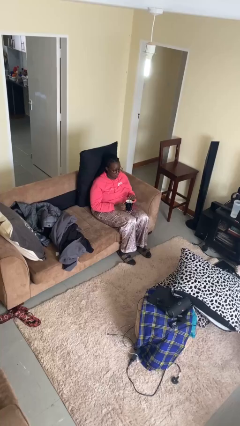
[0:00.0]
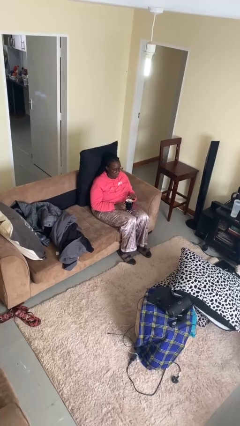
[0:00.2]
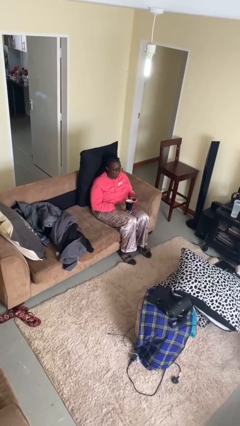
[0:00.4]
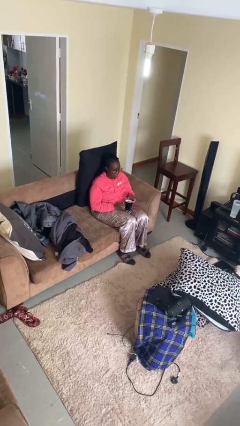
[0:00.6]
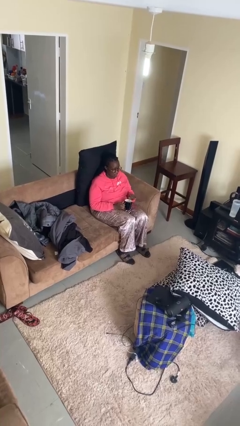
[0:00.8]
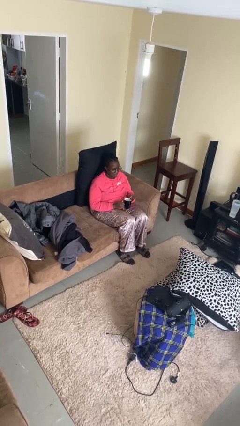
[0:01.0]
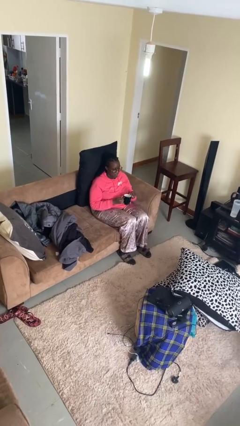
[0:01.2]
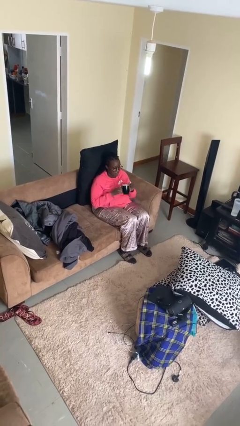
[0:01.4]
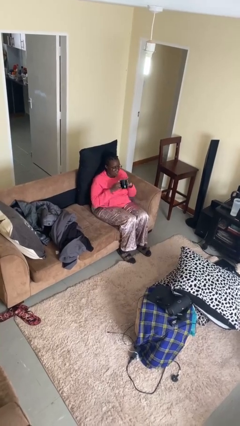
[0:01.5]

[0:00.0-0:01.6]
person stirs mug

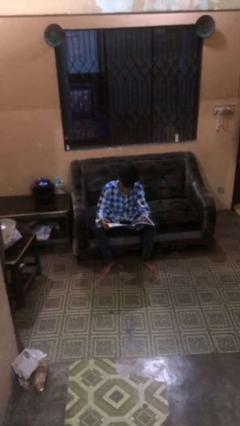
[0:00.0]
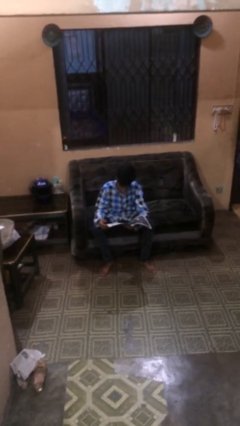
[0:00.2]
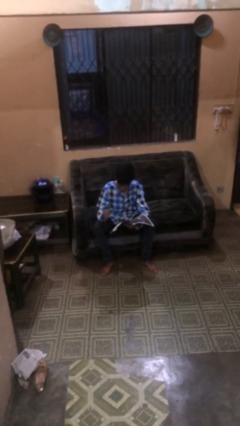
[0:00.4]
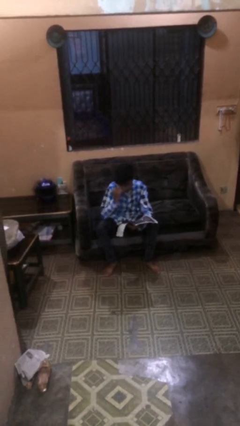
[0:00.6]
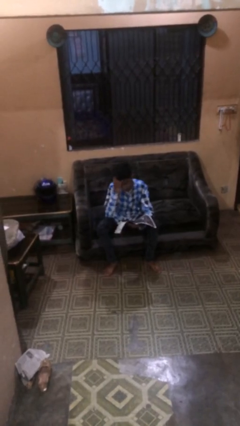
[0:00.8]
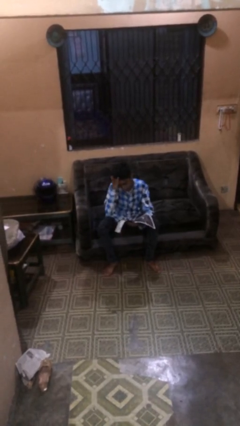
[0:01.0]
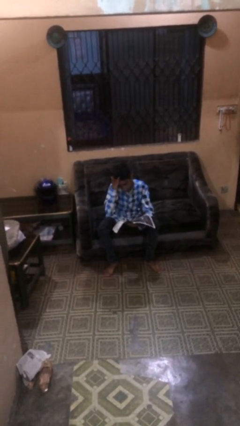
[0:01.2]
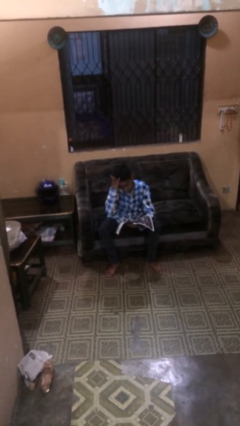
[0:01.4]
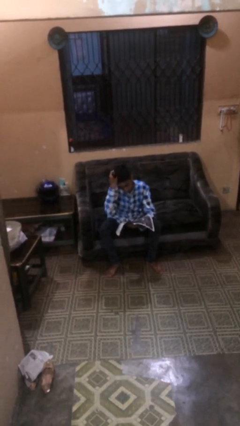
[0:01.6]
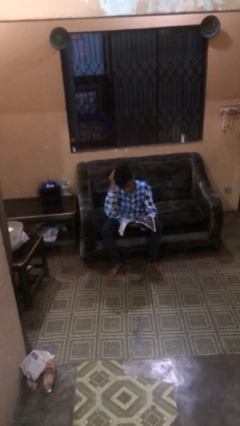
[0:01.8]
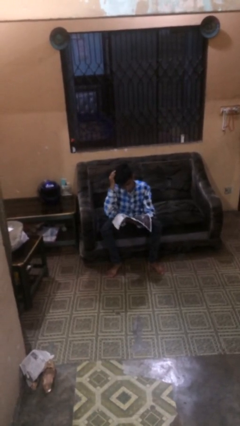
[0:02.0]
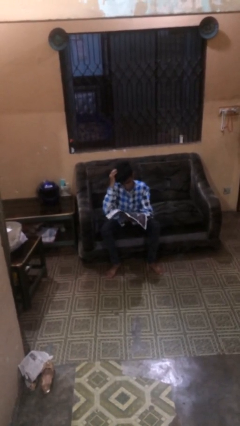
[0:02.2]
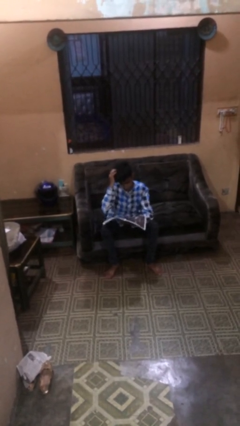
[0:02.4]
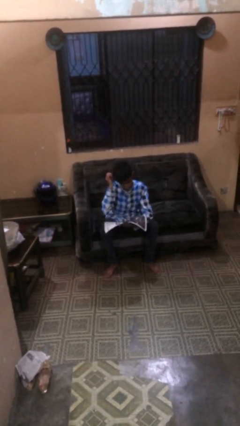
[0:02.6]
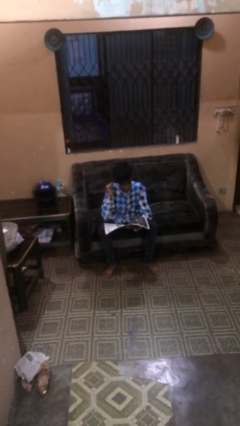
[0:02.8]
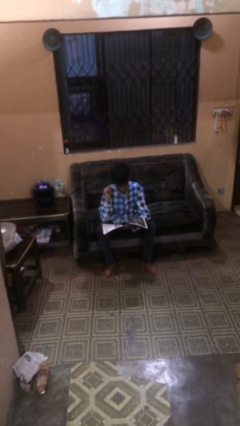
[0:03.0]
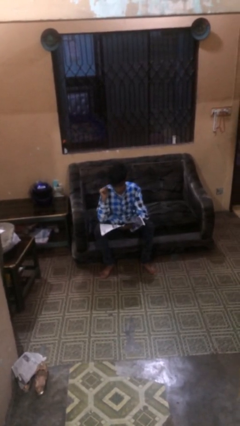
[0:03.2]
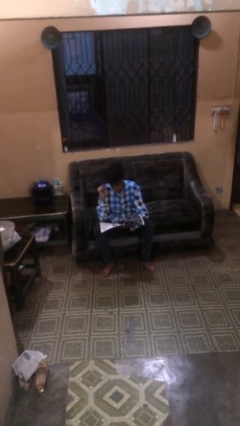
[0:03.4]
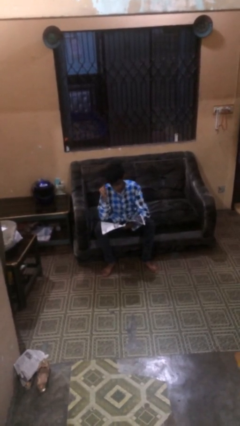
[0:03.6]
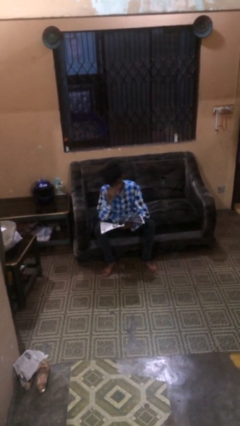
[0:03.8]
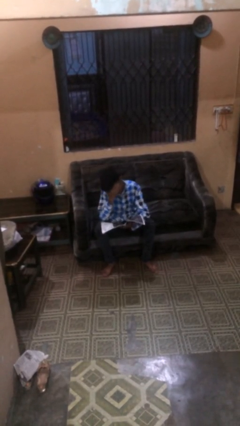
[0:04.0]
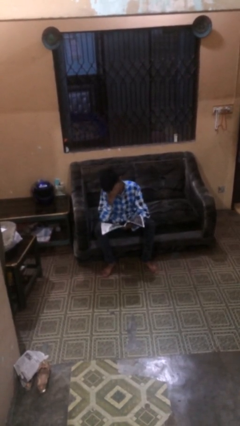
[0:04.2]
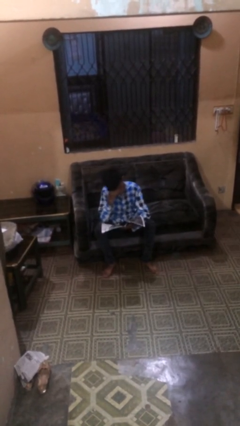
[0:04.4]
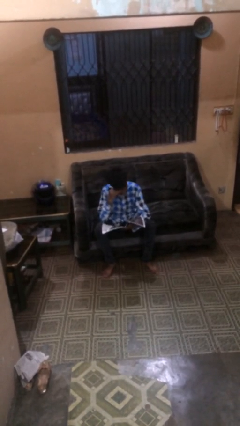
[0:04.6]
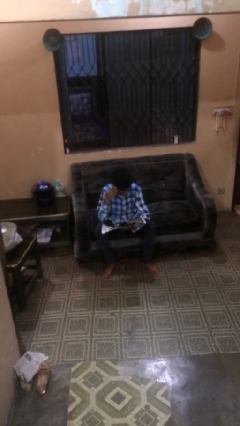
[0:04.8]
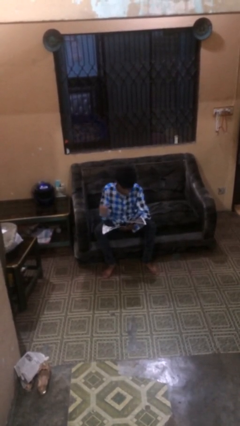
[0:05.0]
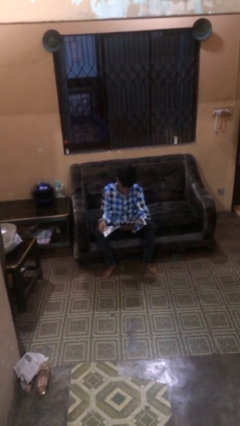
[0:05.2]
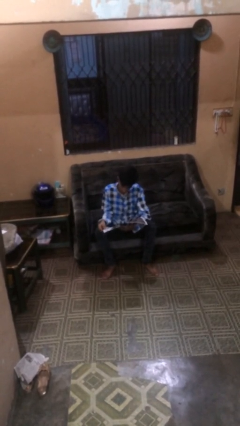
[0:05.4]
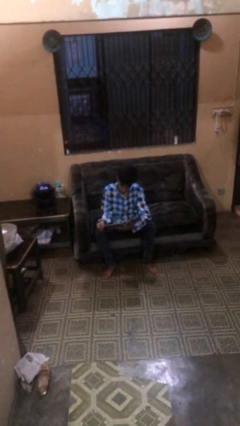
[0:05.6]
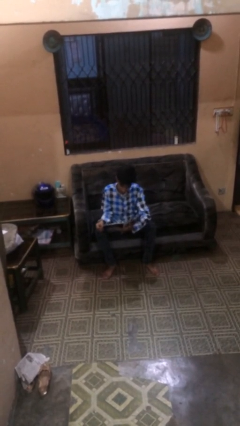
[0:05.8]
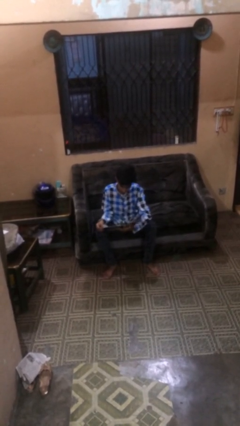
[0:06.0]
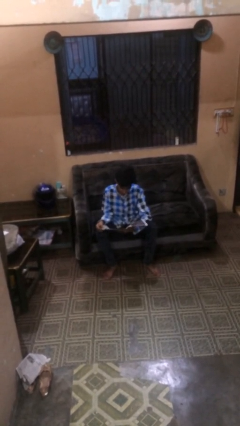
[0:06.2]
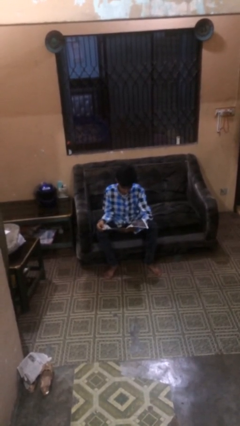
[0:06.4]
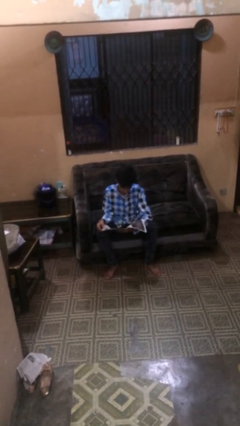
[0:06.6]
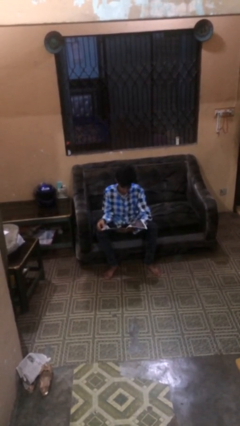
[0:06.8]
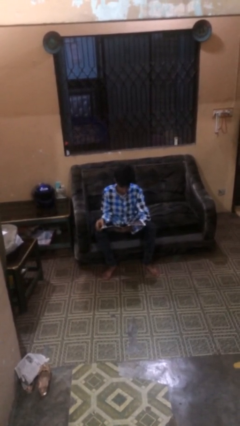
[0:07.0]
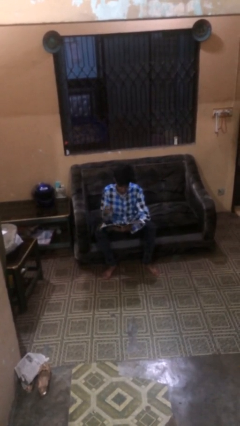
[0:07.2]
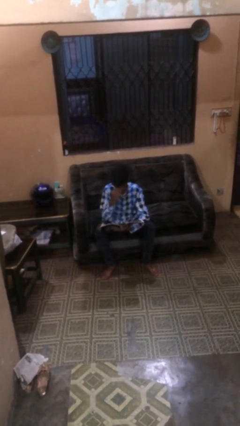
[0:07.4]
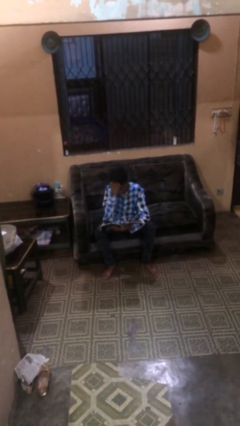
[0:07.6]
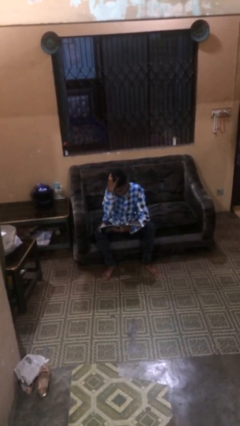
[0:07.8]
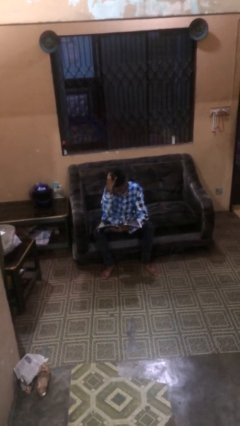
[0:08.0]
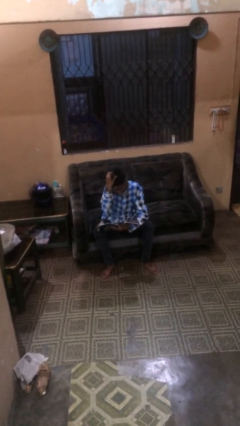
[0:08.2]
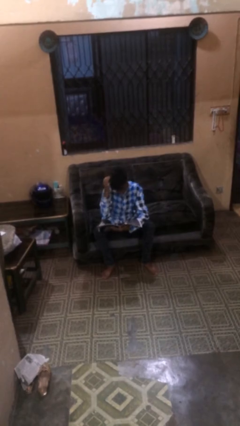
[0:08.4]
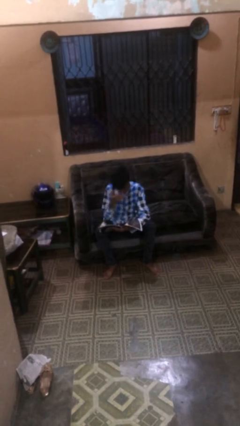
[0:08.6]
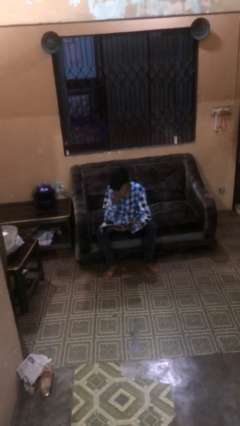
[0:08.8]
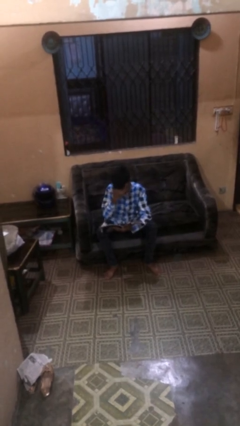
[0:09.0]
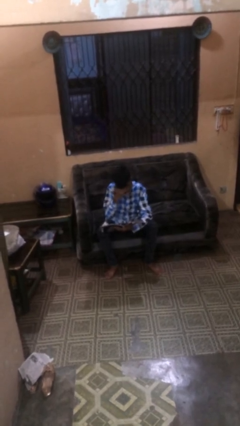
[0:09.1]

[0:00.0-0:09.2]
person reads document

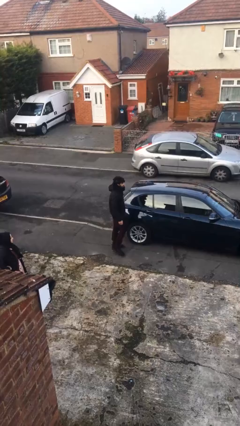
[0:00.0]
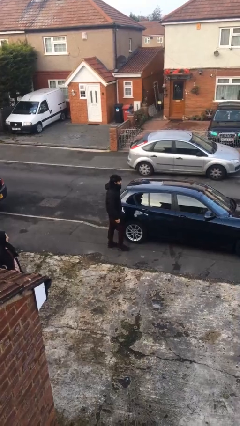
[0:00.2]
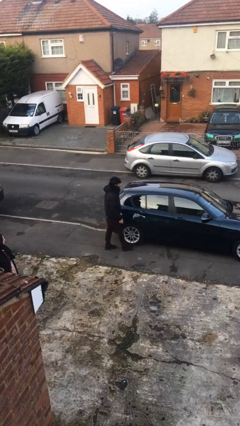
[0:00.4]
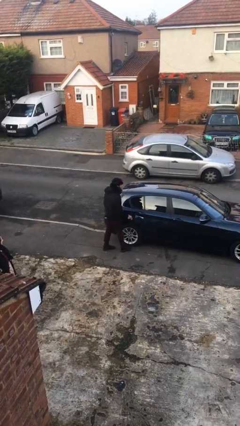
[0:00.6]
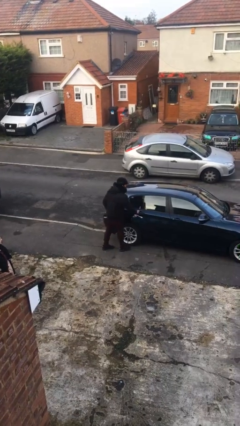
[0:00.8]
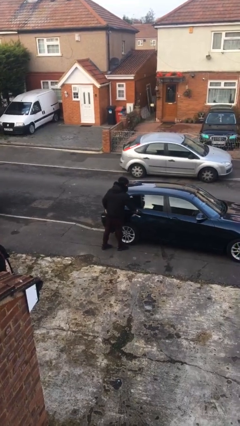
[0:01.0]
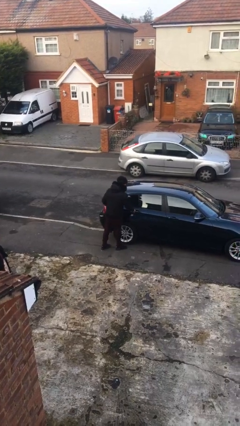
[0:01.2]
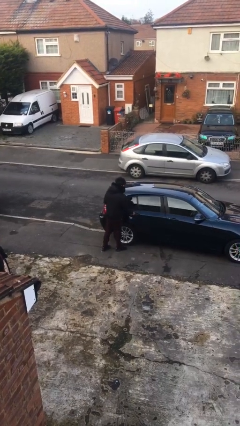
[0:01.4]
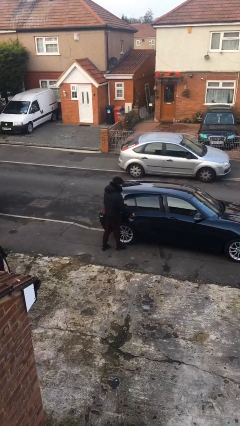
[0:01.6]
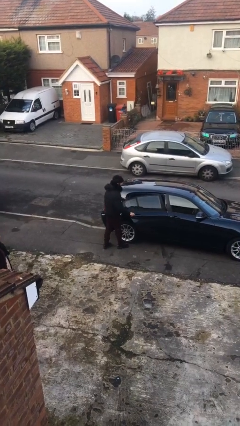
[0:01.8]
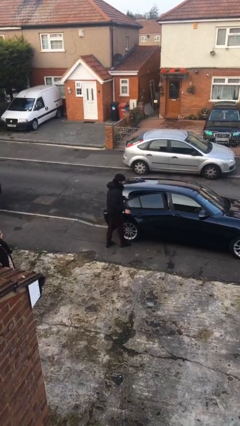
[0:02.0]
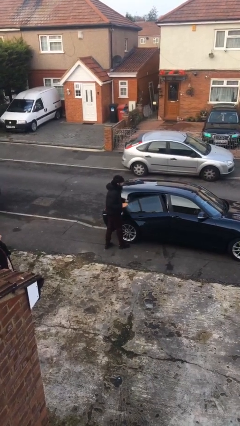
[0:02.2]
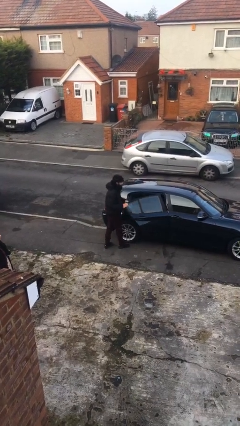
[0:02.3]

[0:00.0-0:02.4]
person opens car door

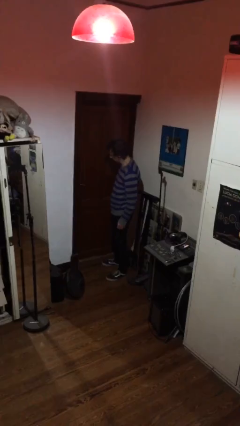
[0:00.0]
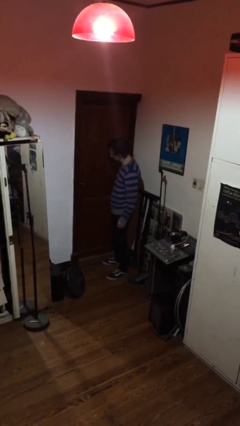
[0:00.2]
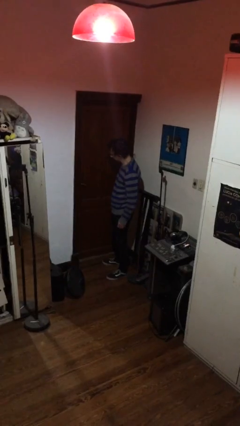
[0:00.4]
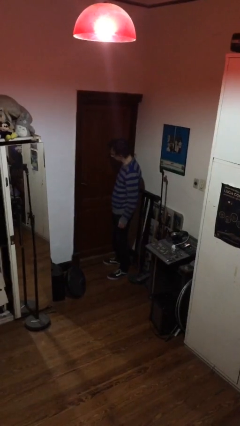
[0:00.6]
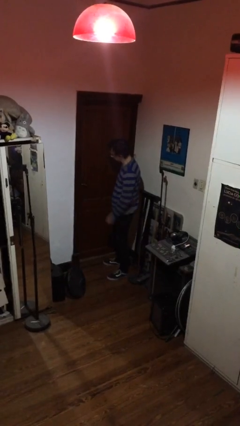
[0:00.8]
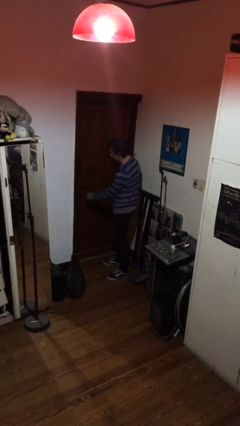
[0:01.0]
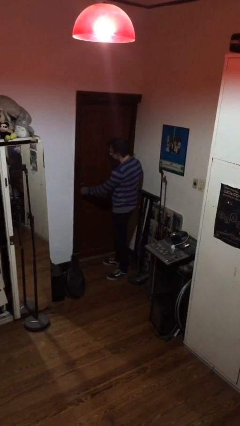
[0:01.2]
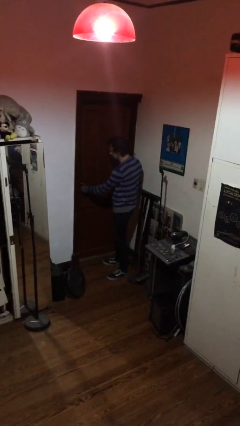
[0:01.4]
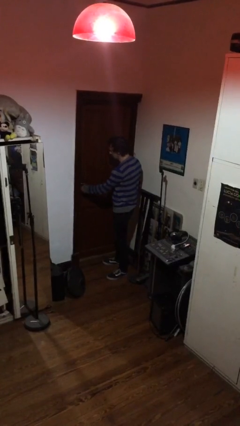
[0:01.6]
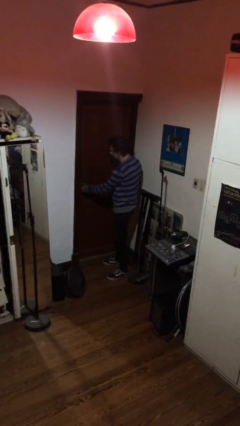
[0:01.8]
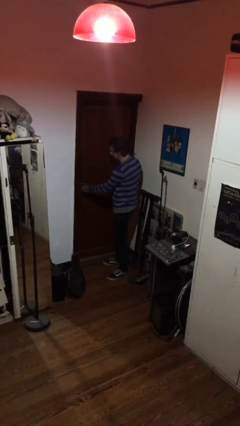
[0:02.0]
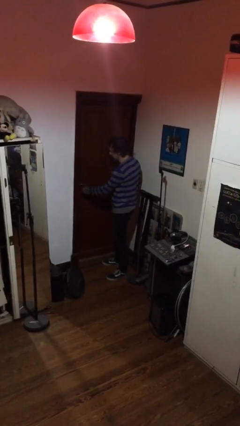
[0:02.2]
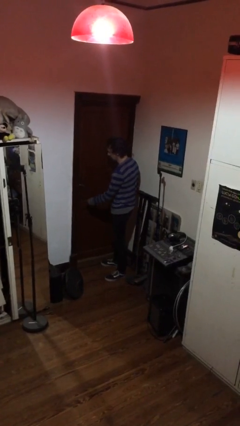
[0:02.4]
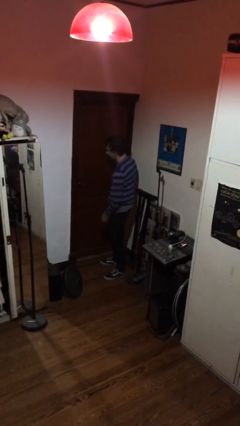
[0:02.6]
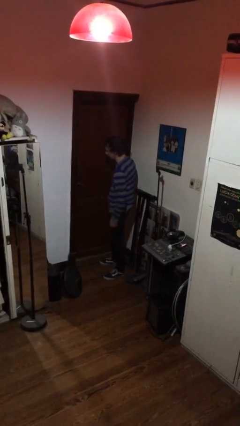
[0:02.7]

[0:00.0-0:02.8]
person locks door with keys

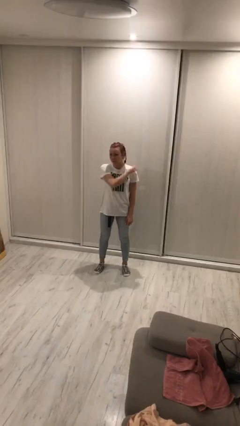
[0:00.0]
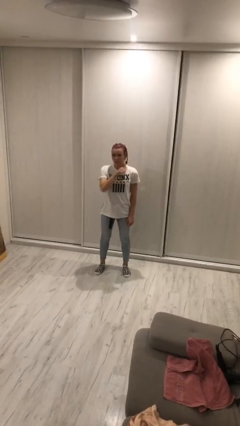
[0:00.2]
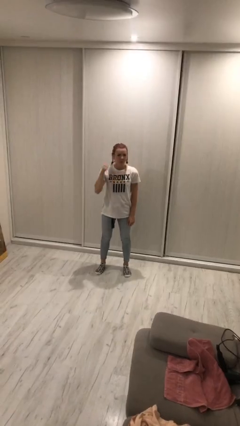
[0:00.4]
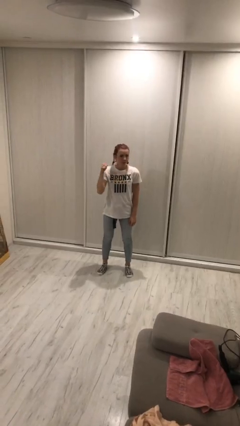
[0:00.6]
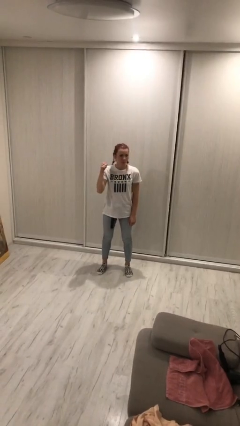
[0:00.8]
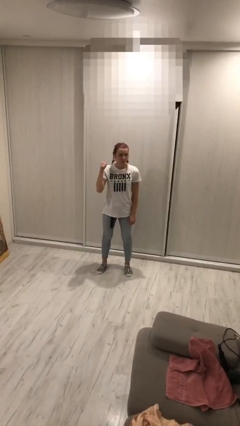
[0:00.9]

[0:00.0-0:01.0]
person gestures cut

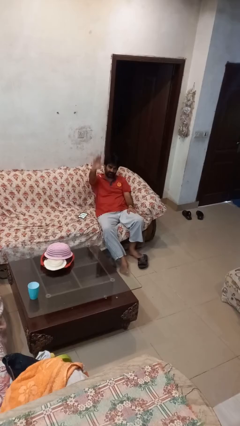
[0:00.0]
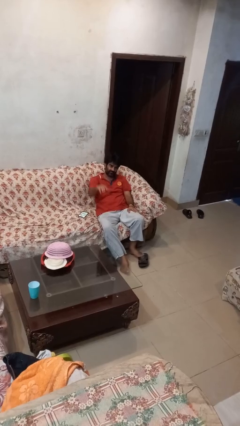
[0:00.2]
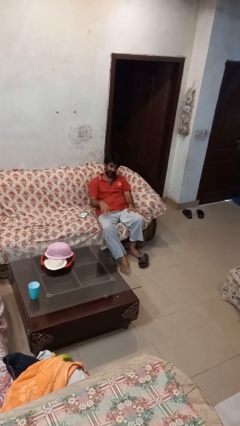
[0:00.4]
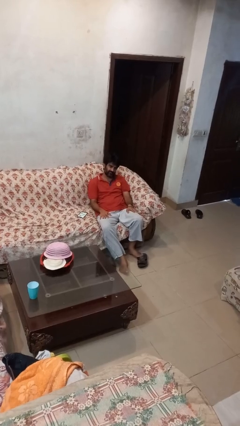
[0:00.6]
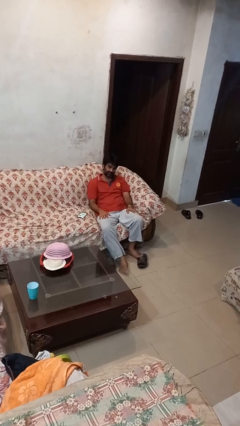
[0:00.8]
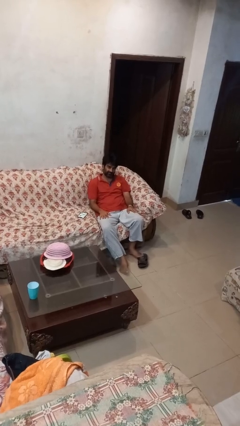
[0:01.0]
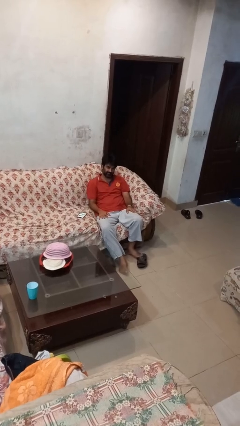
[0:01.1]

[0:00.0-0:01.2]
person gestures lower hand
